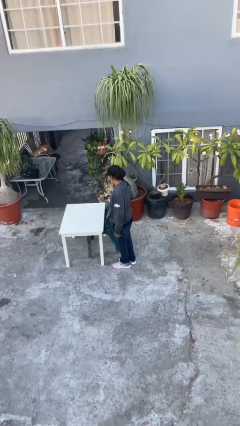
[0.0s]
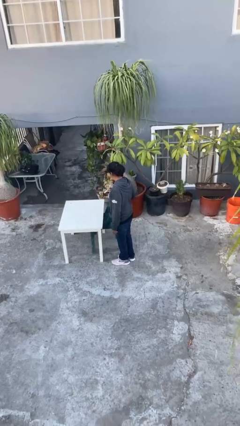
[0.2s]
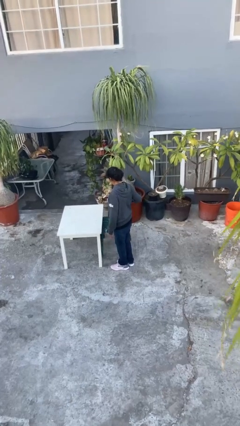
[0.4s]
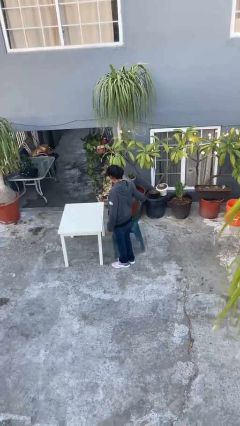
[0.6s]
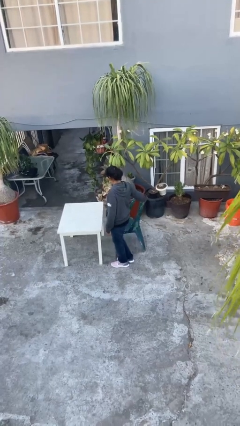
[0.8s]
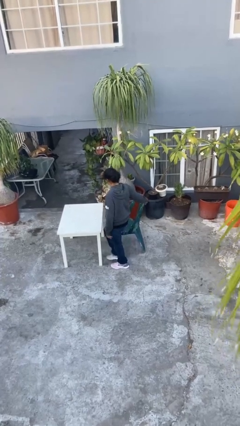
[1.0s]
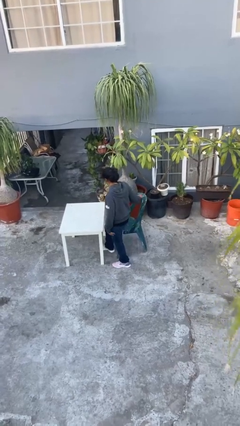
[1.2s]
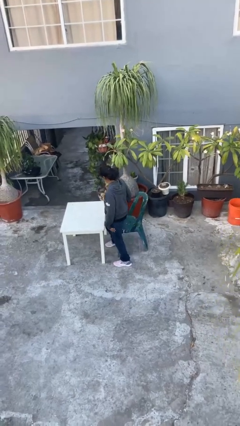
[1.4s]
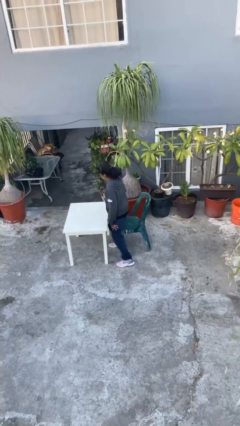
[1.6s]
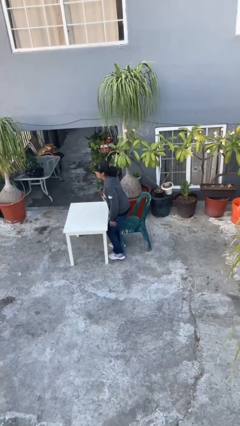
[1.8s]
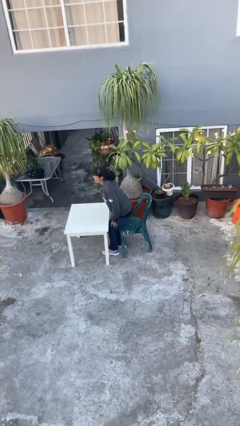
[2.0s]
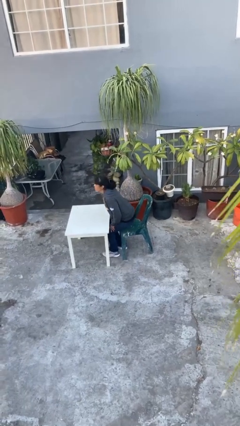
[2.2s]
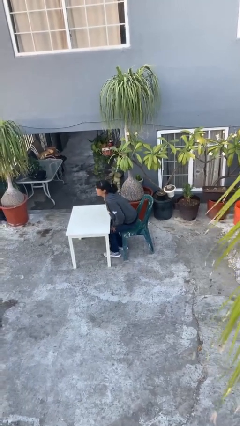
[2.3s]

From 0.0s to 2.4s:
person sits down

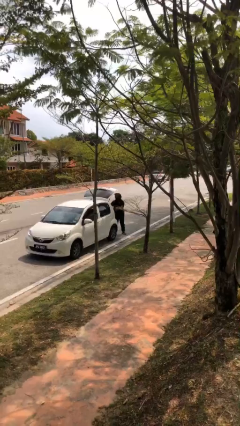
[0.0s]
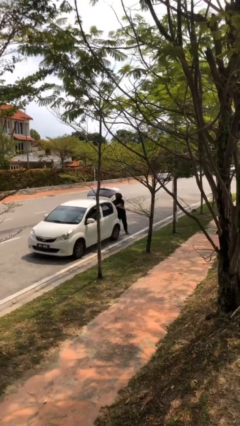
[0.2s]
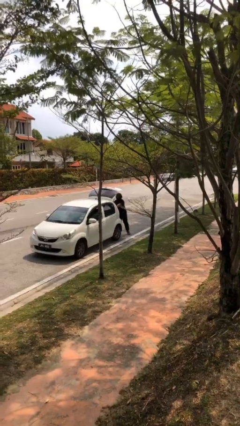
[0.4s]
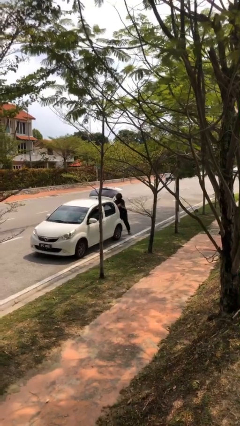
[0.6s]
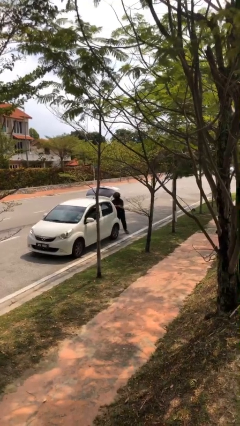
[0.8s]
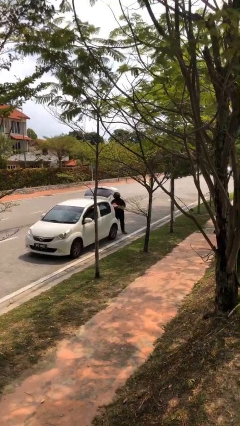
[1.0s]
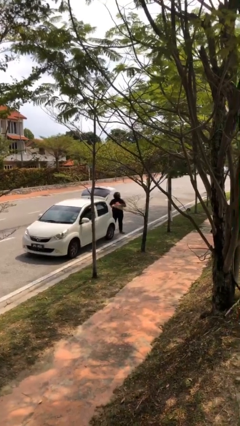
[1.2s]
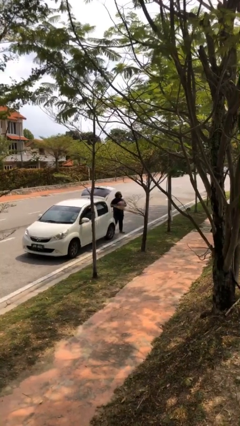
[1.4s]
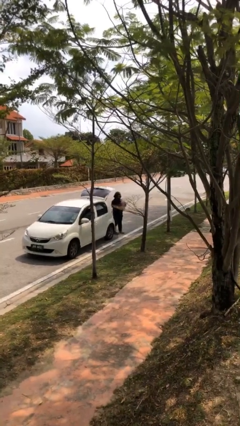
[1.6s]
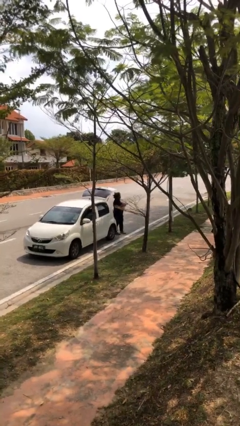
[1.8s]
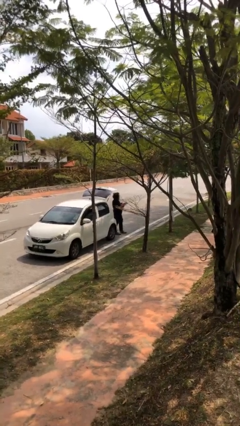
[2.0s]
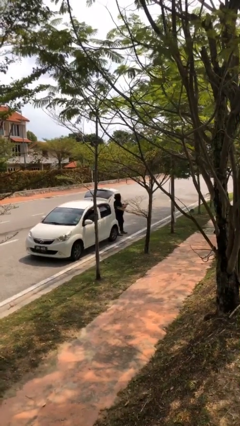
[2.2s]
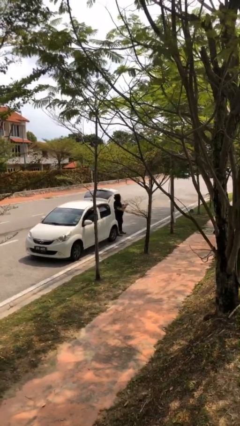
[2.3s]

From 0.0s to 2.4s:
person unloads car

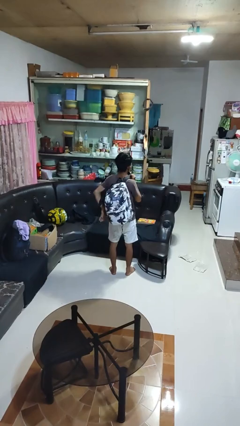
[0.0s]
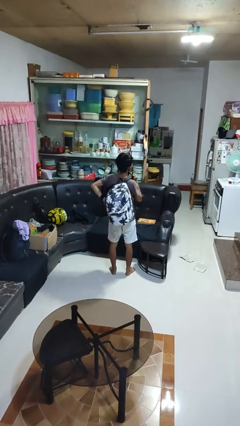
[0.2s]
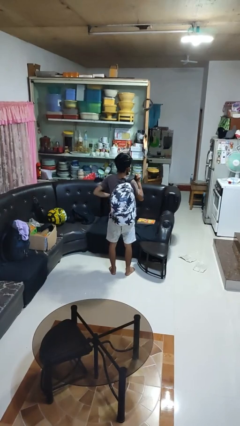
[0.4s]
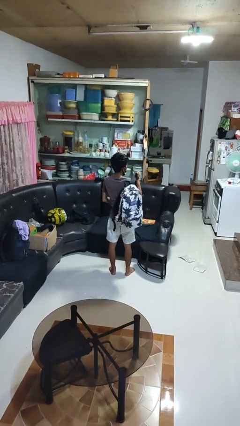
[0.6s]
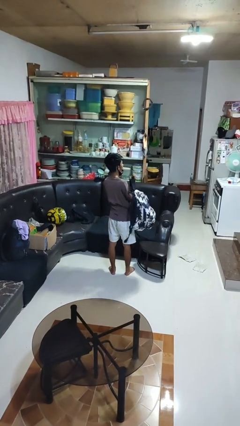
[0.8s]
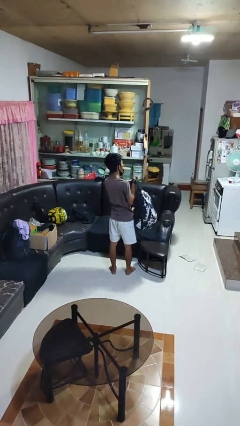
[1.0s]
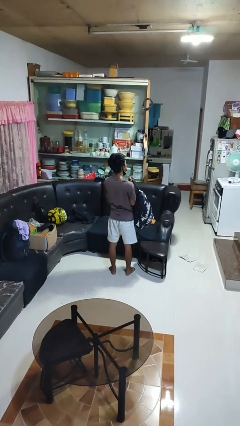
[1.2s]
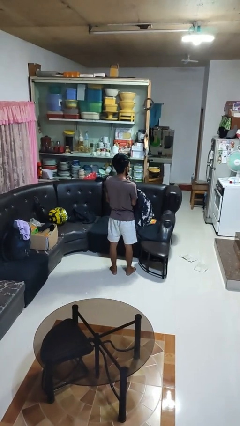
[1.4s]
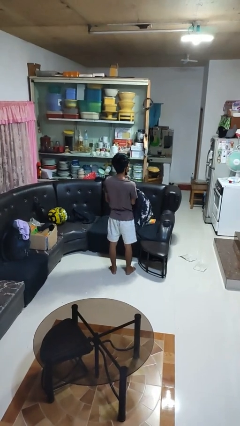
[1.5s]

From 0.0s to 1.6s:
person takes off backpack

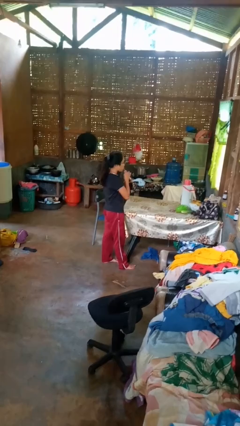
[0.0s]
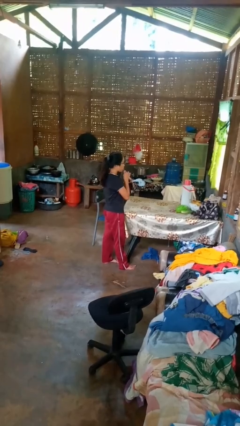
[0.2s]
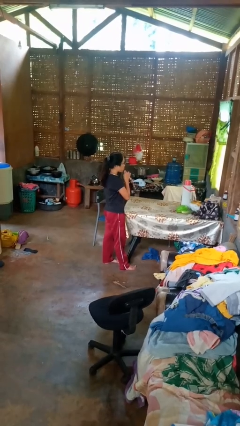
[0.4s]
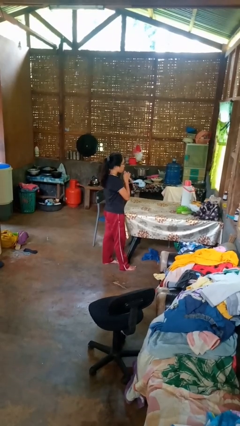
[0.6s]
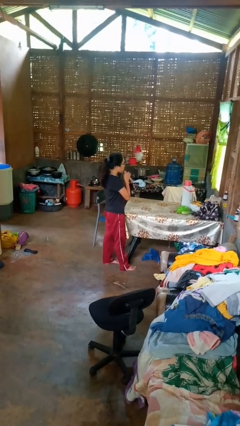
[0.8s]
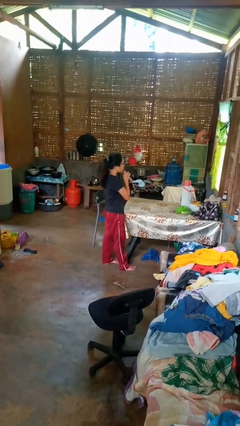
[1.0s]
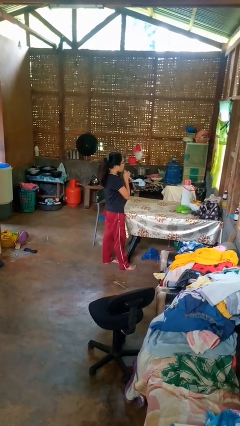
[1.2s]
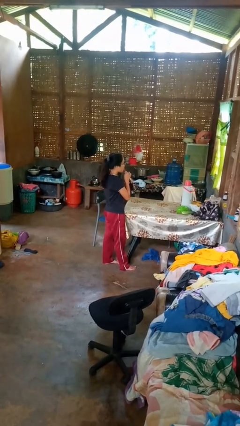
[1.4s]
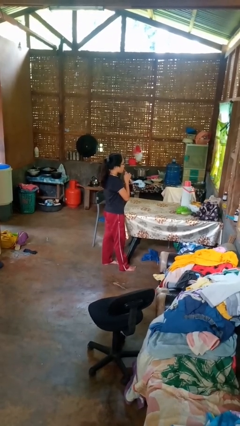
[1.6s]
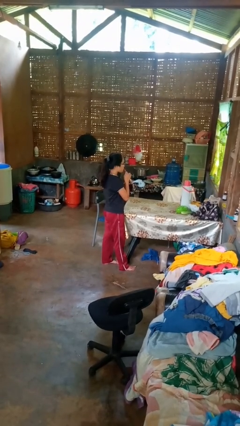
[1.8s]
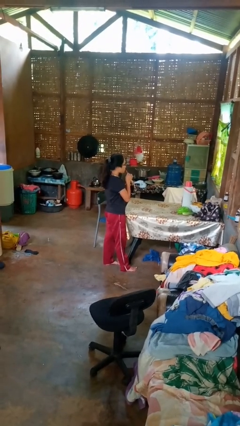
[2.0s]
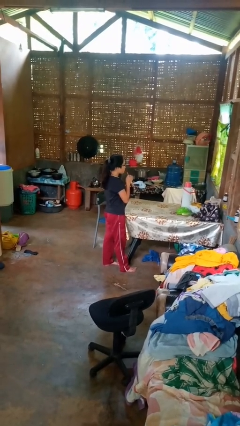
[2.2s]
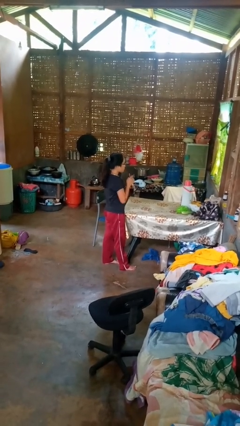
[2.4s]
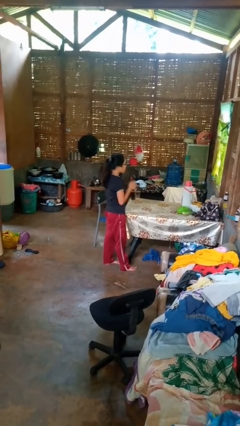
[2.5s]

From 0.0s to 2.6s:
person drinks from straw

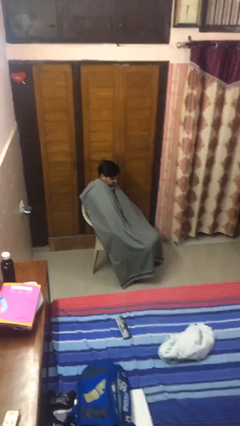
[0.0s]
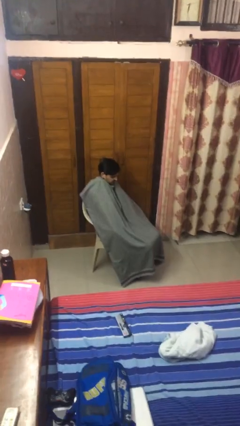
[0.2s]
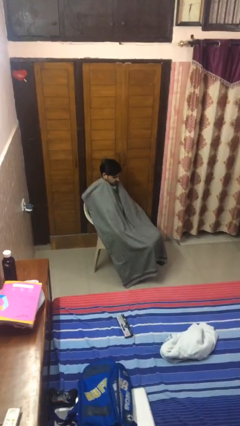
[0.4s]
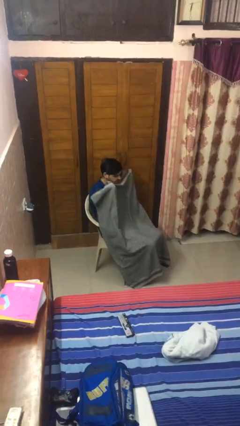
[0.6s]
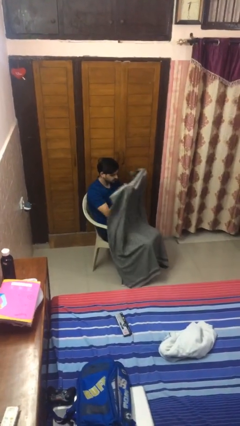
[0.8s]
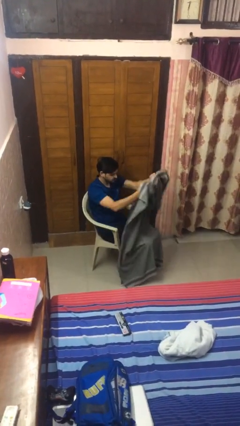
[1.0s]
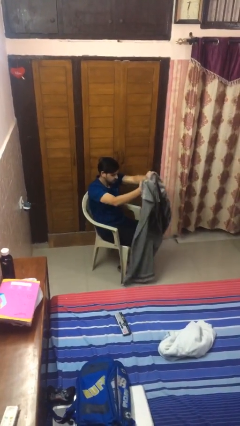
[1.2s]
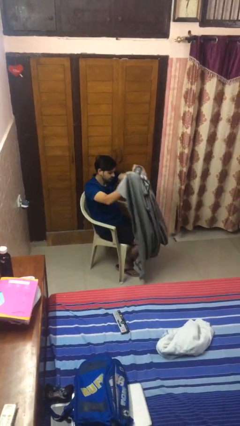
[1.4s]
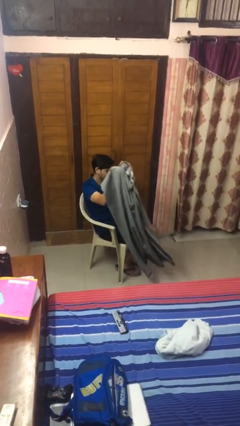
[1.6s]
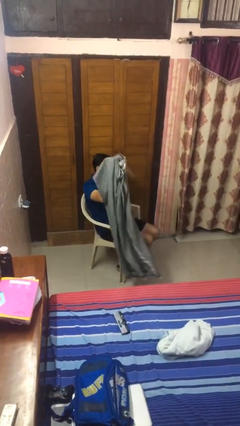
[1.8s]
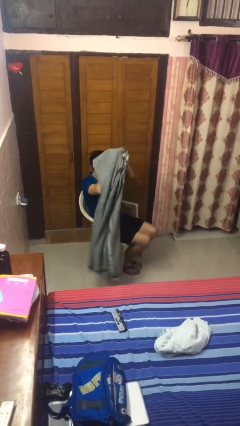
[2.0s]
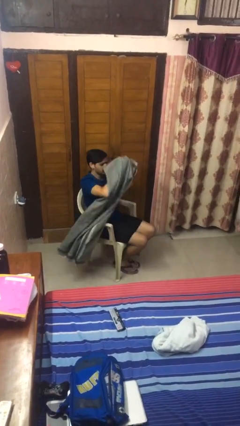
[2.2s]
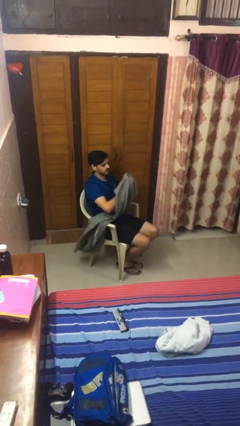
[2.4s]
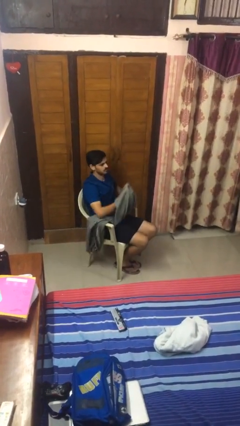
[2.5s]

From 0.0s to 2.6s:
person uncovers with blanket

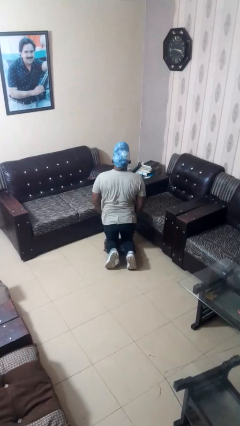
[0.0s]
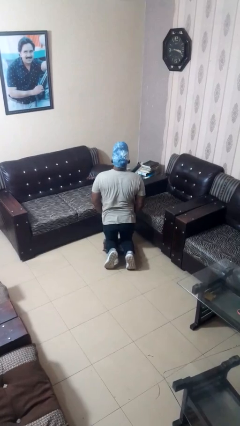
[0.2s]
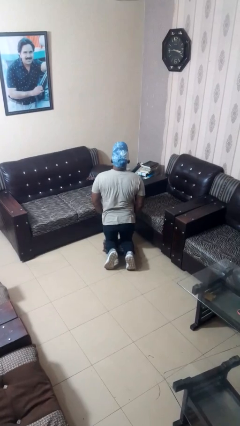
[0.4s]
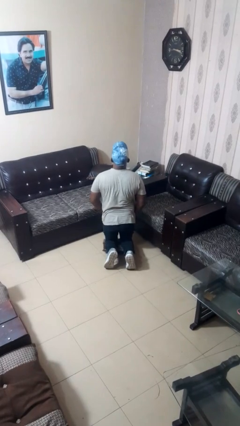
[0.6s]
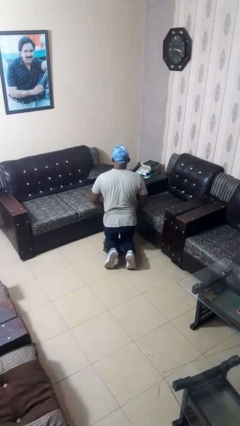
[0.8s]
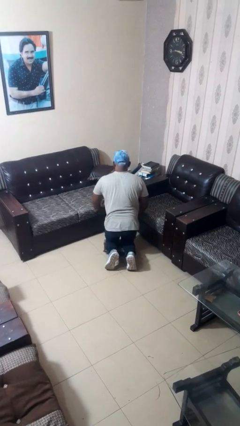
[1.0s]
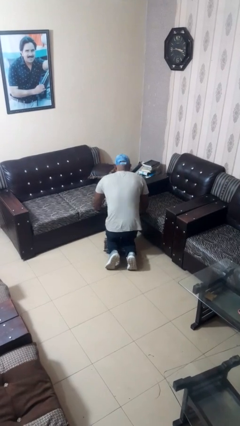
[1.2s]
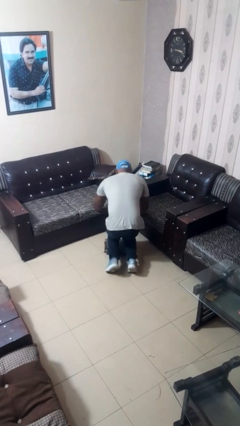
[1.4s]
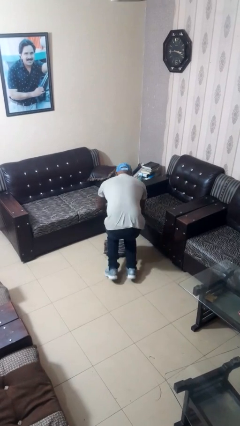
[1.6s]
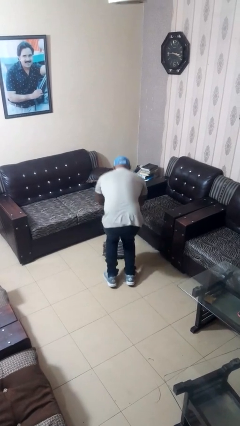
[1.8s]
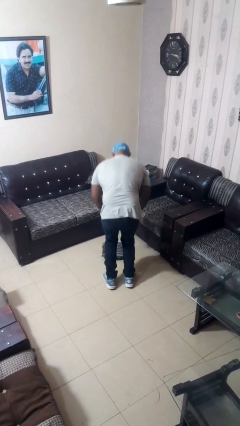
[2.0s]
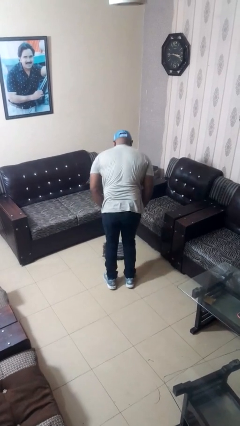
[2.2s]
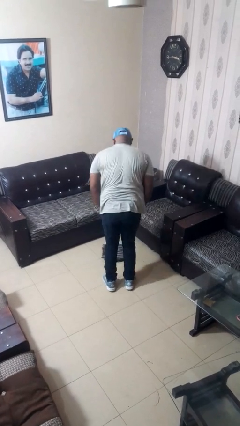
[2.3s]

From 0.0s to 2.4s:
person stands up from floor

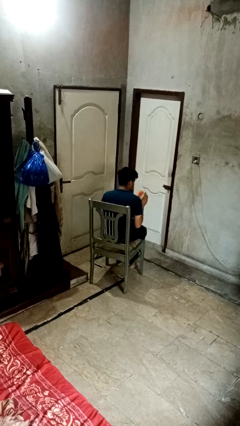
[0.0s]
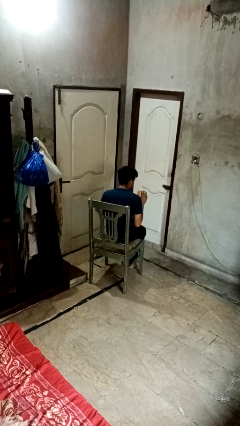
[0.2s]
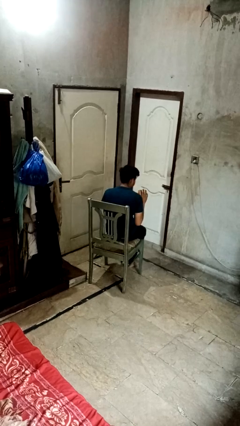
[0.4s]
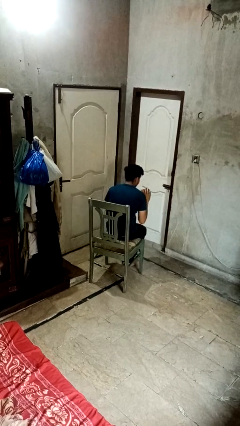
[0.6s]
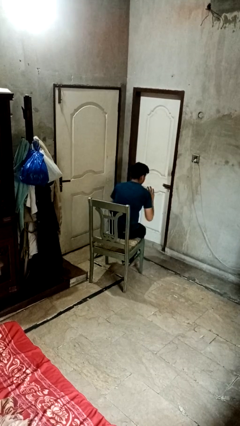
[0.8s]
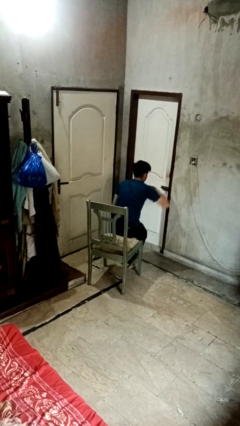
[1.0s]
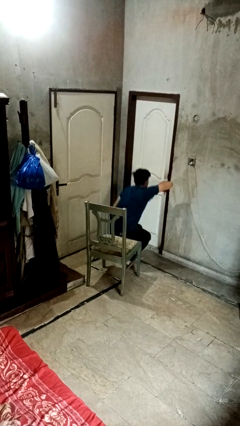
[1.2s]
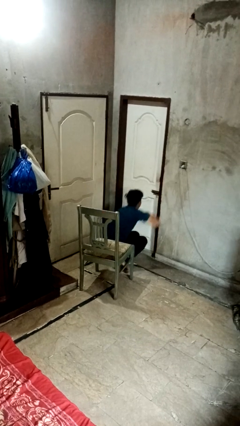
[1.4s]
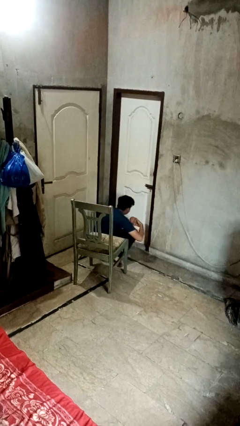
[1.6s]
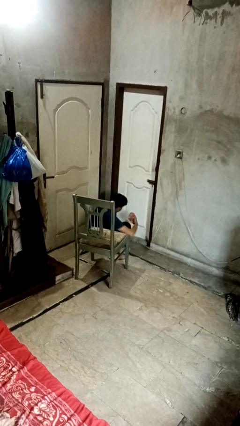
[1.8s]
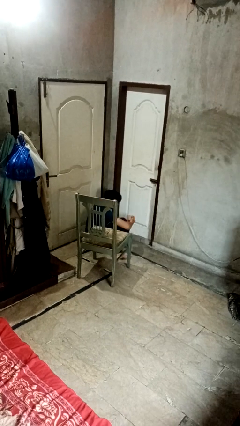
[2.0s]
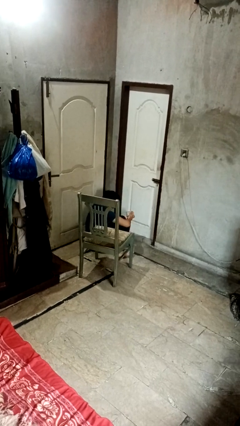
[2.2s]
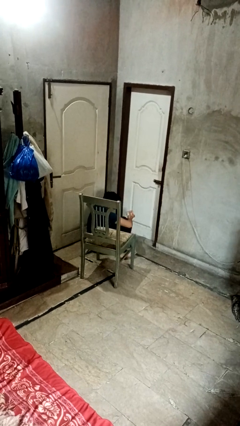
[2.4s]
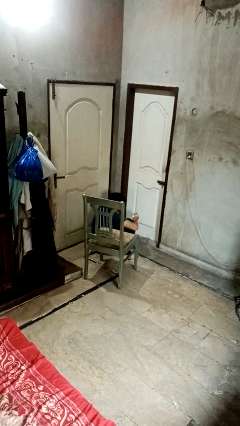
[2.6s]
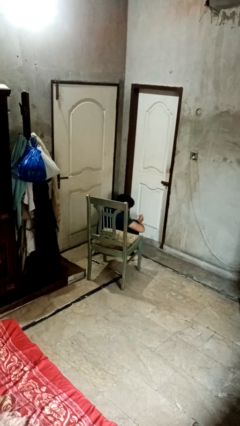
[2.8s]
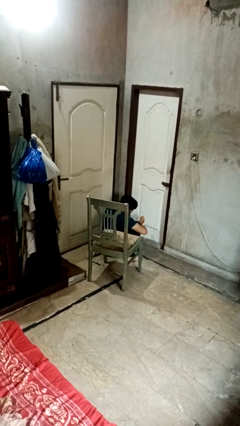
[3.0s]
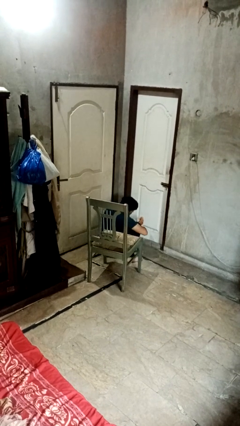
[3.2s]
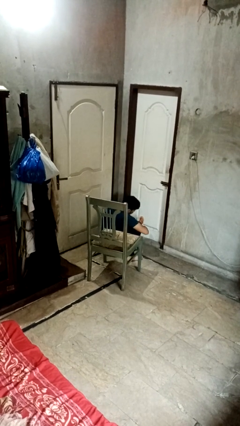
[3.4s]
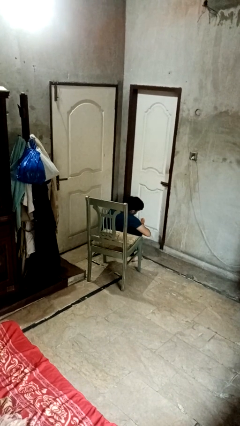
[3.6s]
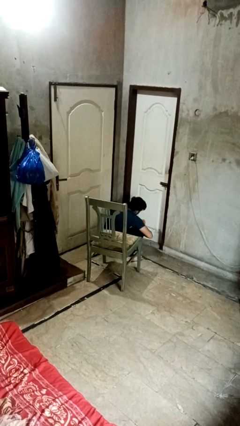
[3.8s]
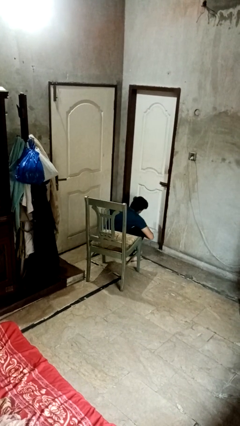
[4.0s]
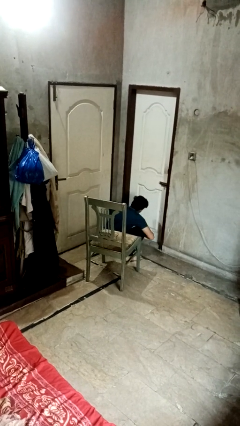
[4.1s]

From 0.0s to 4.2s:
person falls from chair
